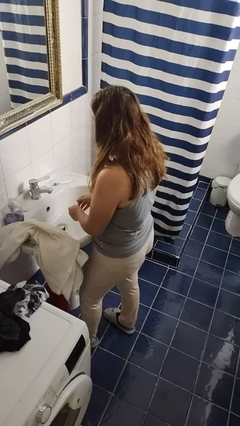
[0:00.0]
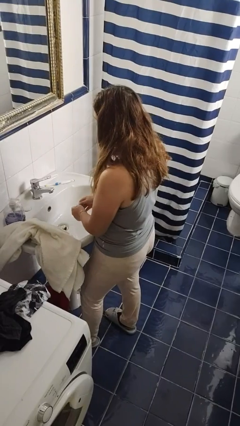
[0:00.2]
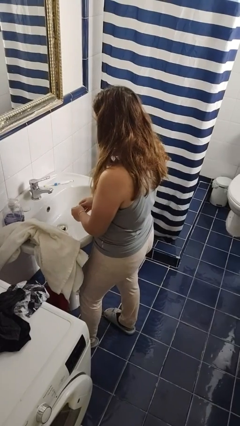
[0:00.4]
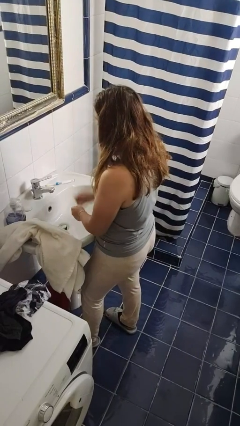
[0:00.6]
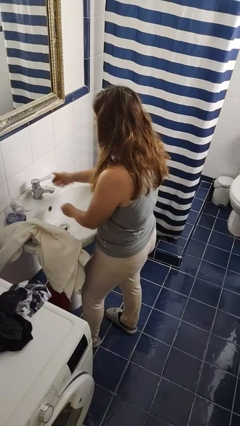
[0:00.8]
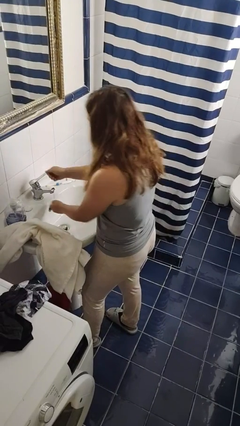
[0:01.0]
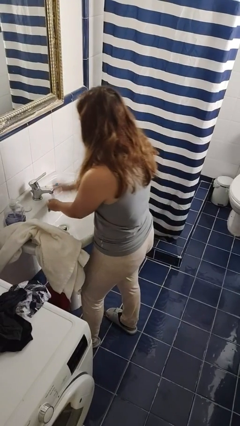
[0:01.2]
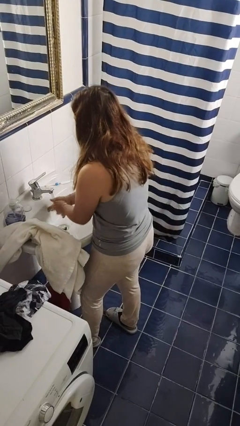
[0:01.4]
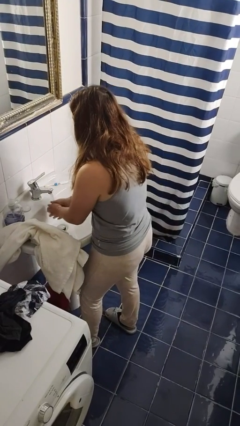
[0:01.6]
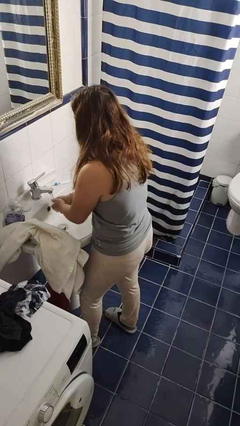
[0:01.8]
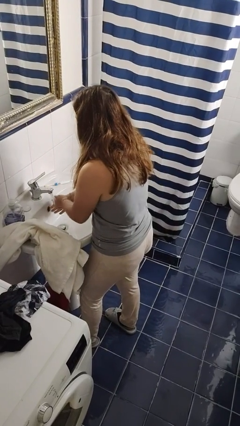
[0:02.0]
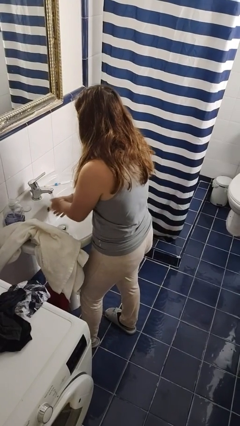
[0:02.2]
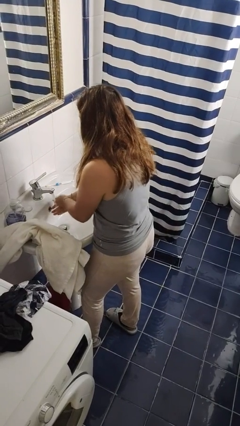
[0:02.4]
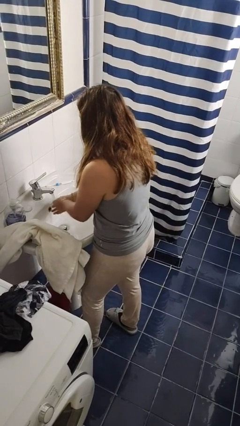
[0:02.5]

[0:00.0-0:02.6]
person washes hands

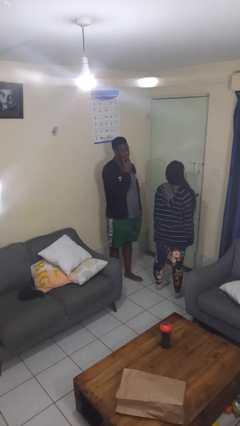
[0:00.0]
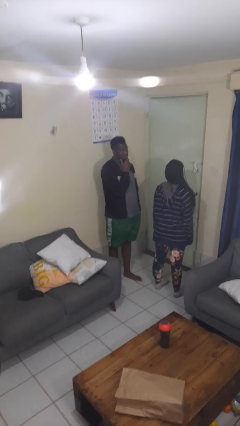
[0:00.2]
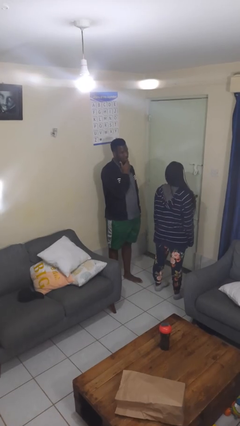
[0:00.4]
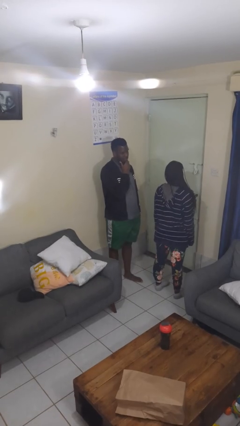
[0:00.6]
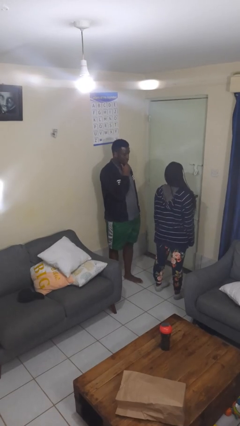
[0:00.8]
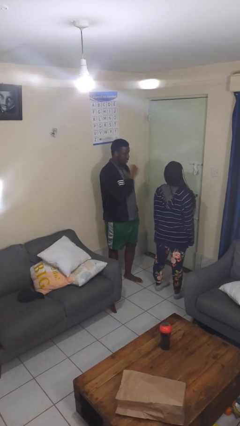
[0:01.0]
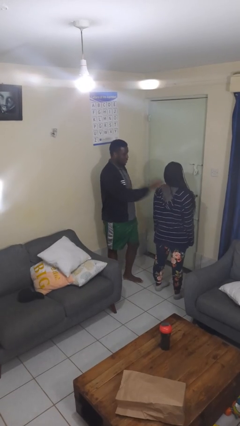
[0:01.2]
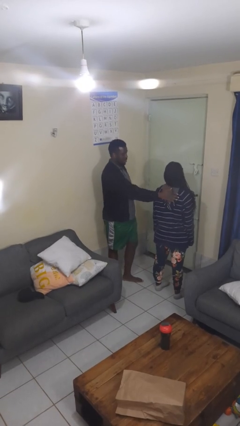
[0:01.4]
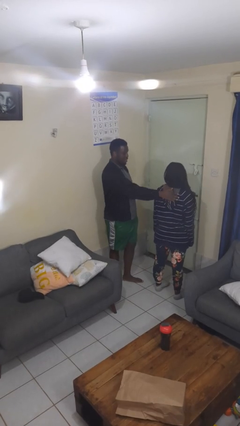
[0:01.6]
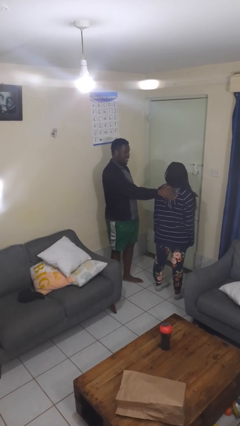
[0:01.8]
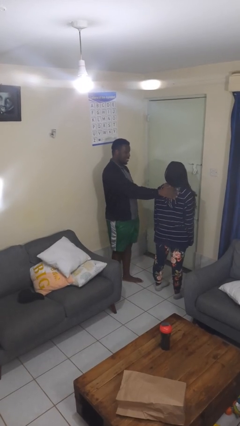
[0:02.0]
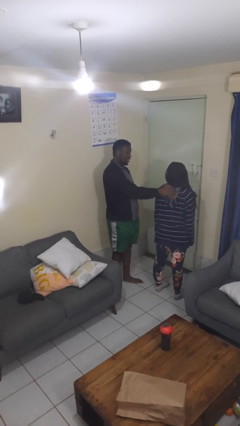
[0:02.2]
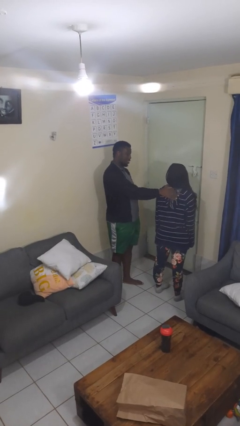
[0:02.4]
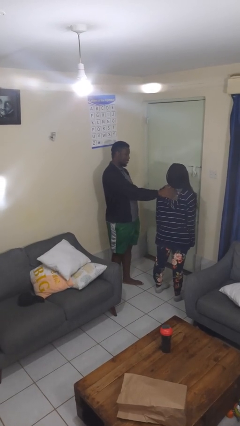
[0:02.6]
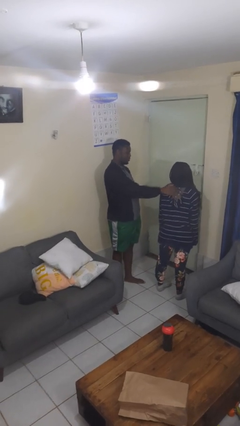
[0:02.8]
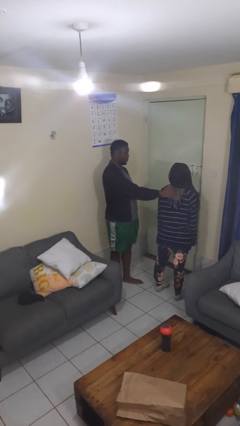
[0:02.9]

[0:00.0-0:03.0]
person touches back of person

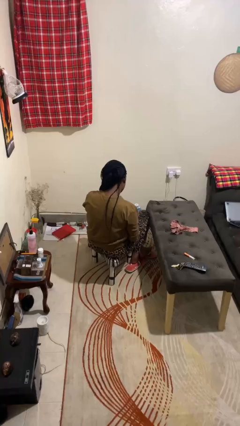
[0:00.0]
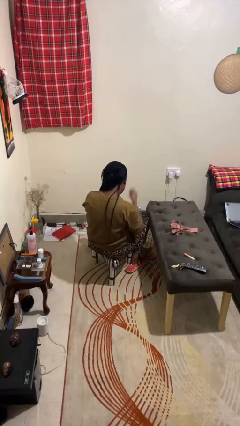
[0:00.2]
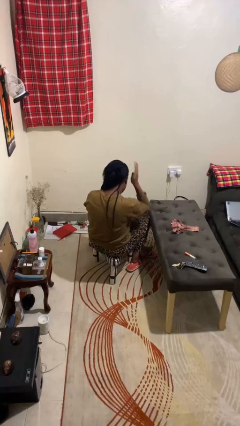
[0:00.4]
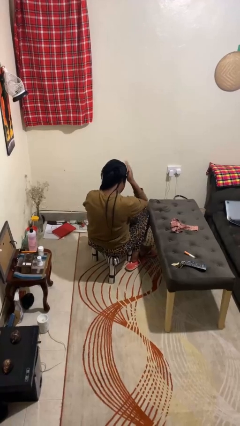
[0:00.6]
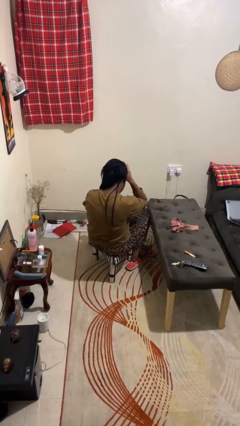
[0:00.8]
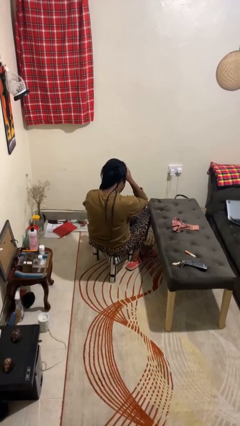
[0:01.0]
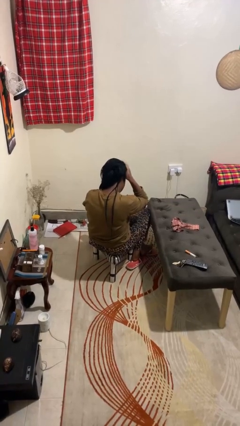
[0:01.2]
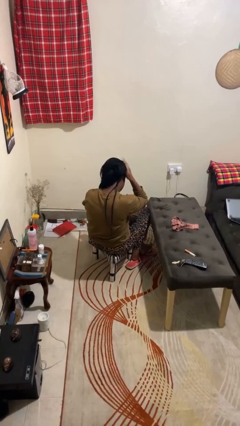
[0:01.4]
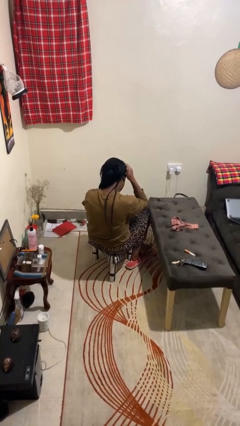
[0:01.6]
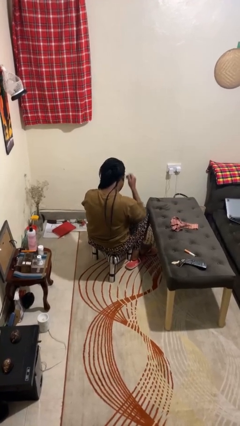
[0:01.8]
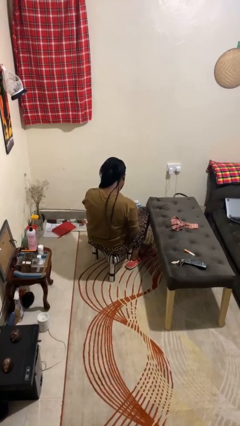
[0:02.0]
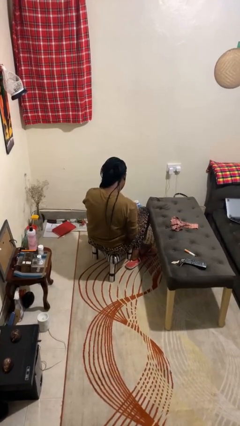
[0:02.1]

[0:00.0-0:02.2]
person pats head

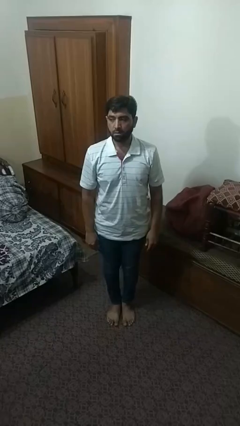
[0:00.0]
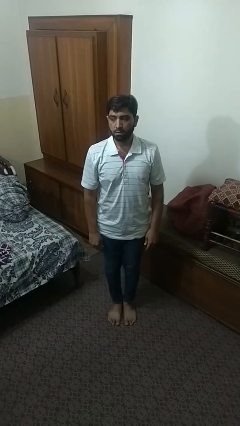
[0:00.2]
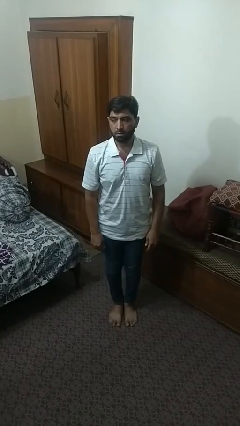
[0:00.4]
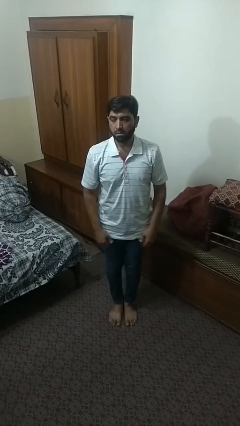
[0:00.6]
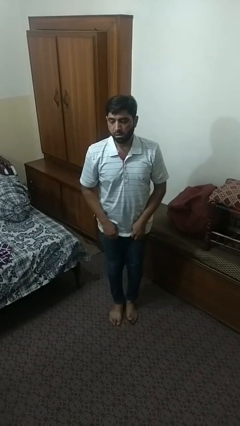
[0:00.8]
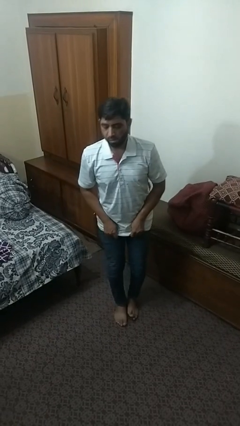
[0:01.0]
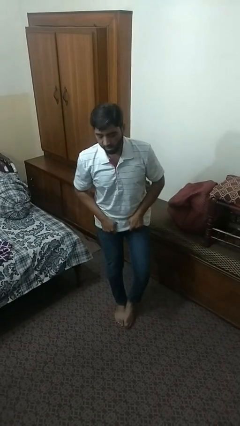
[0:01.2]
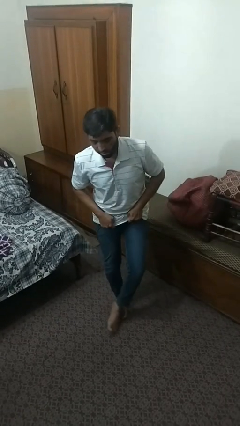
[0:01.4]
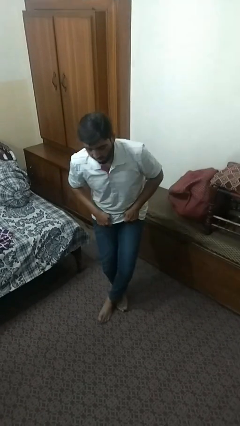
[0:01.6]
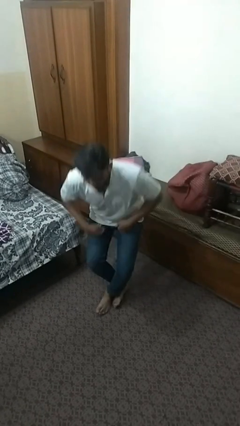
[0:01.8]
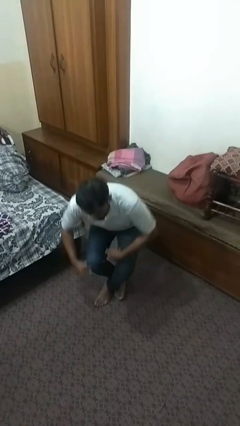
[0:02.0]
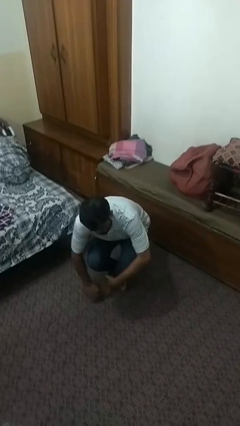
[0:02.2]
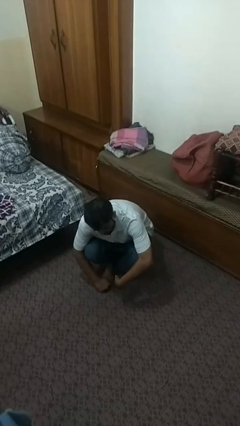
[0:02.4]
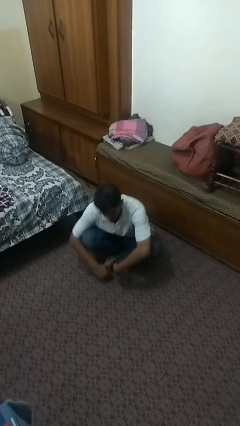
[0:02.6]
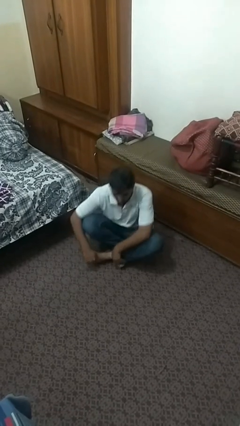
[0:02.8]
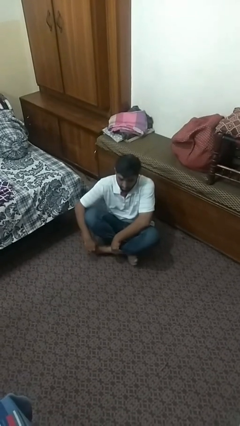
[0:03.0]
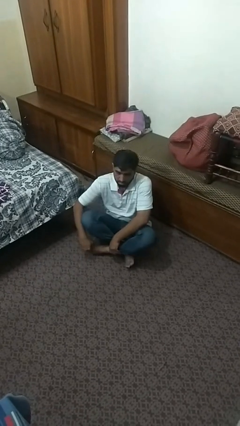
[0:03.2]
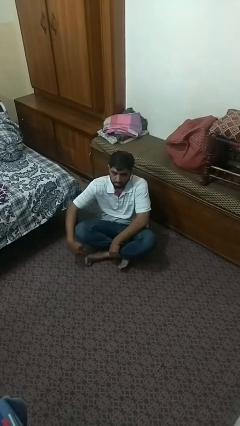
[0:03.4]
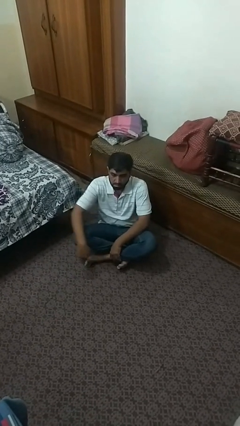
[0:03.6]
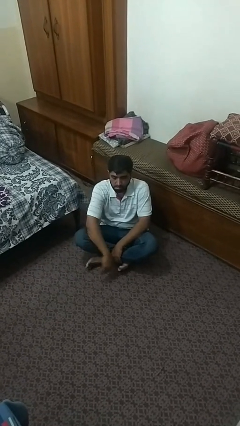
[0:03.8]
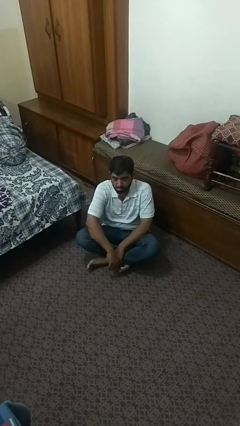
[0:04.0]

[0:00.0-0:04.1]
person sits crisscross

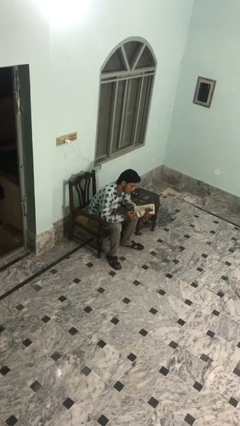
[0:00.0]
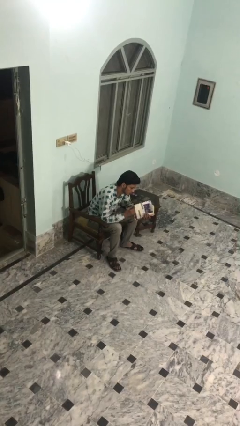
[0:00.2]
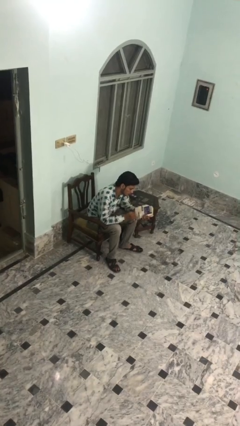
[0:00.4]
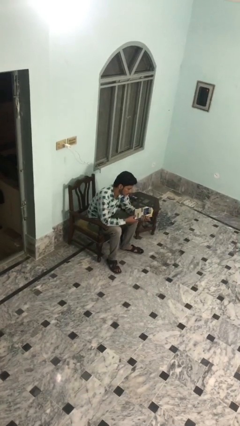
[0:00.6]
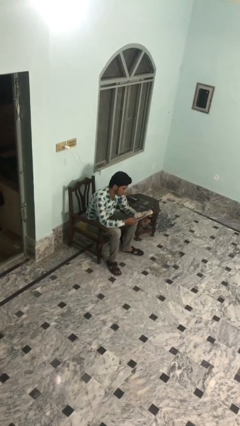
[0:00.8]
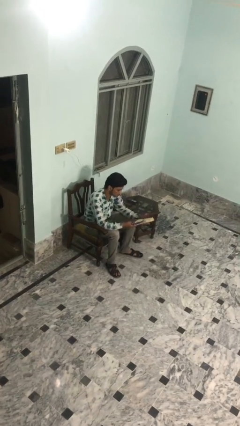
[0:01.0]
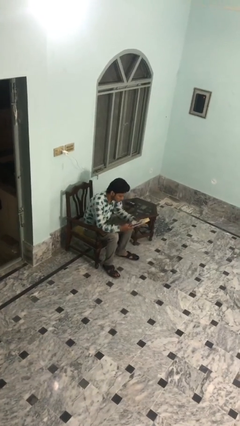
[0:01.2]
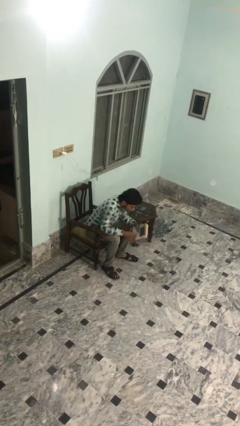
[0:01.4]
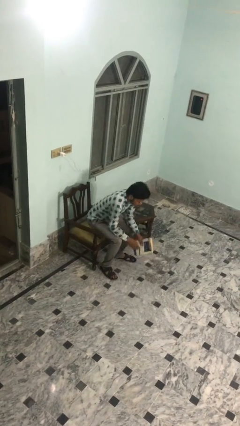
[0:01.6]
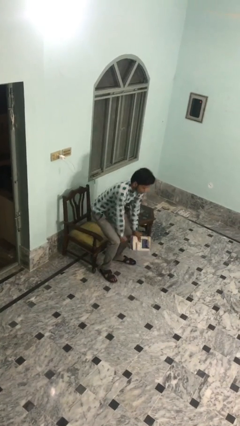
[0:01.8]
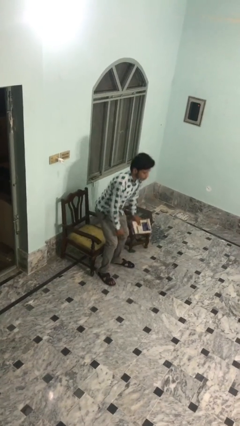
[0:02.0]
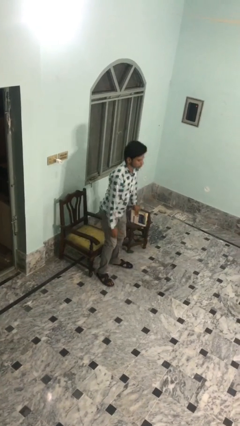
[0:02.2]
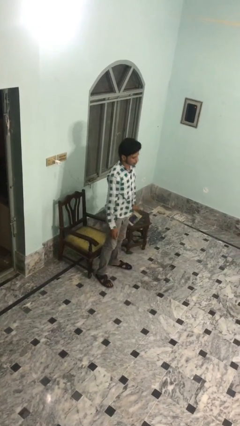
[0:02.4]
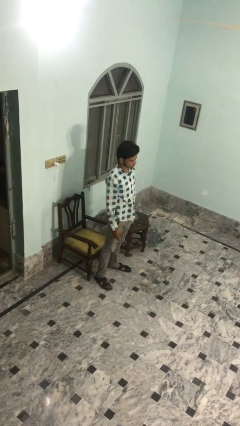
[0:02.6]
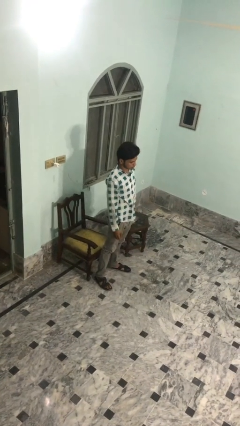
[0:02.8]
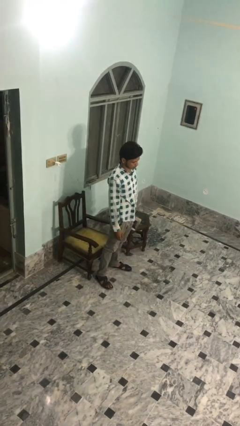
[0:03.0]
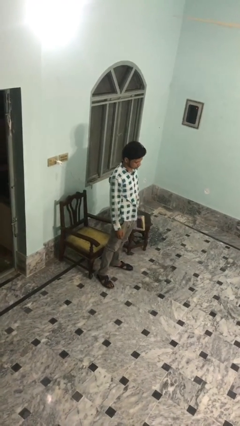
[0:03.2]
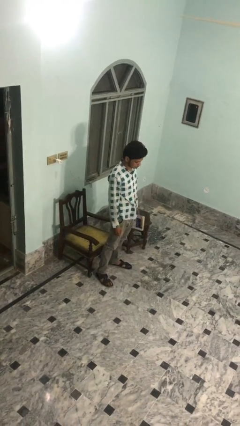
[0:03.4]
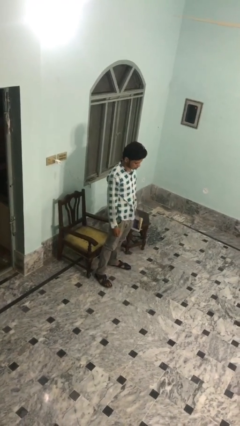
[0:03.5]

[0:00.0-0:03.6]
person stands up

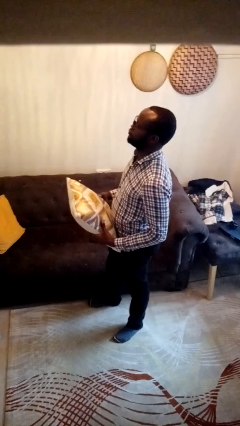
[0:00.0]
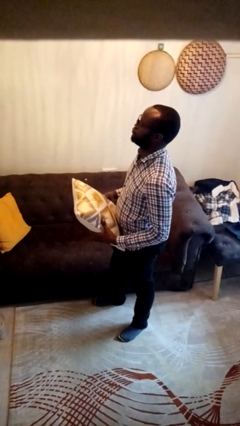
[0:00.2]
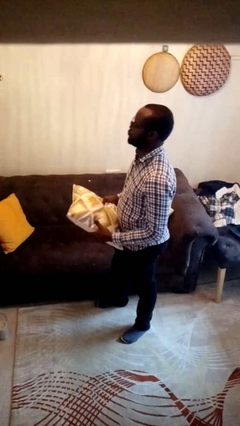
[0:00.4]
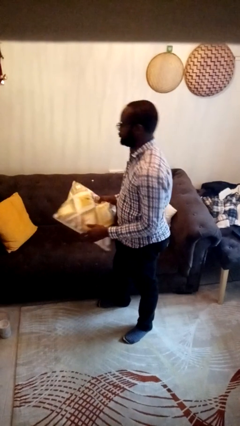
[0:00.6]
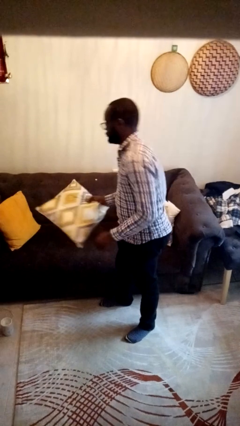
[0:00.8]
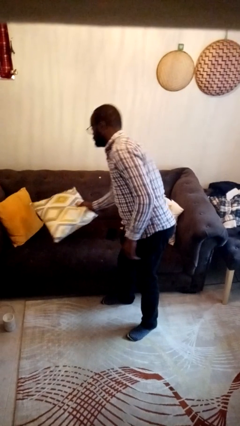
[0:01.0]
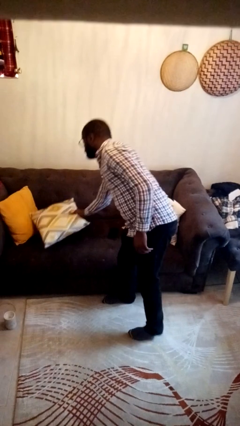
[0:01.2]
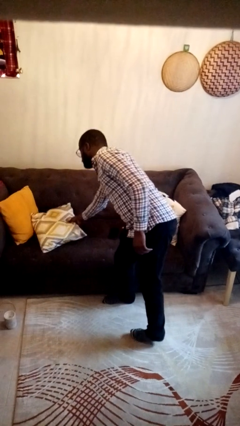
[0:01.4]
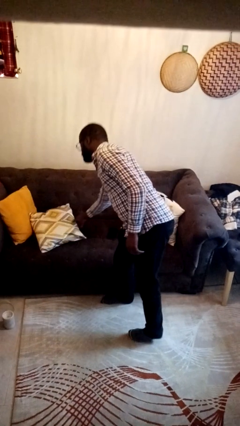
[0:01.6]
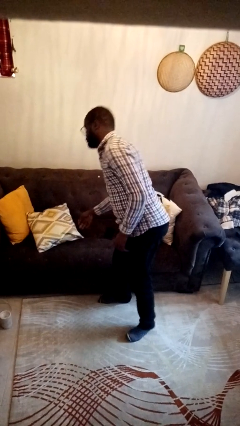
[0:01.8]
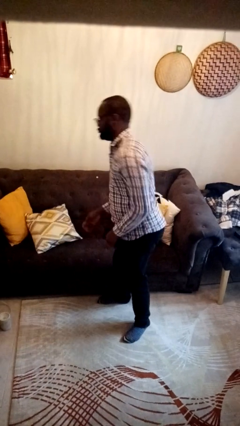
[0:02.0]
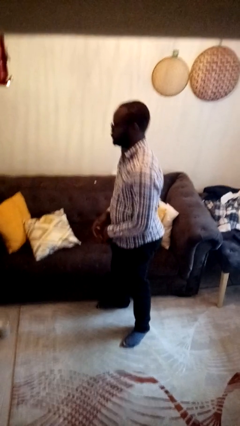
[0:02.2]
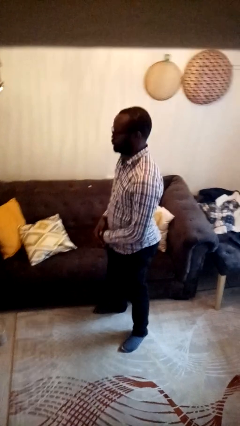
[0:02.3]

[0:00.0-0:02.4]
person puts down object on couch
